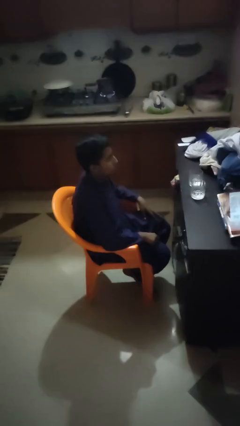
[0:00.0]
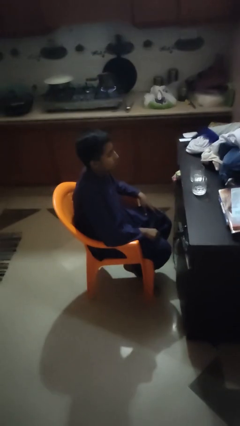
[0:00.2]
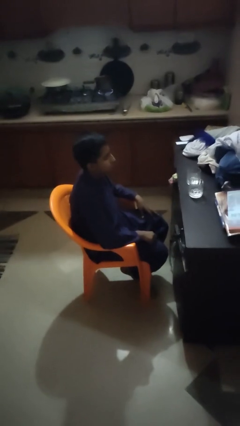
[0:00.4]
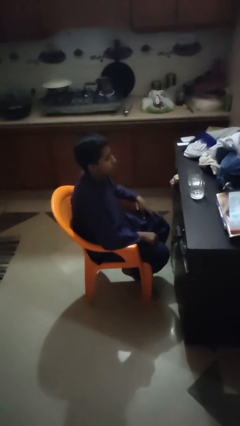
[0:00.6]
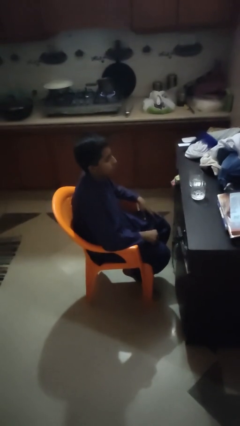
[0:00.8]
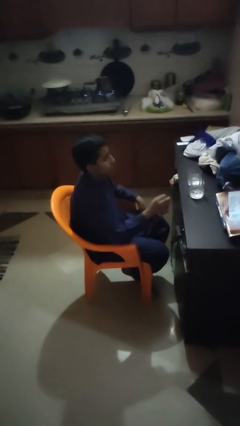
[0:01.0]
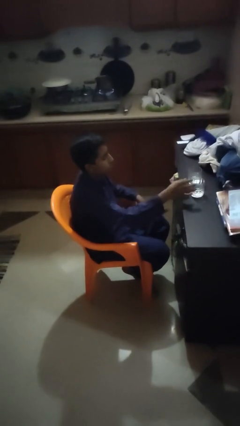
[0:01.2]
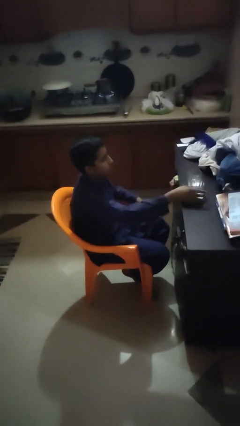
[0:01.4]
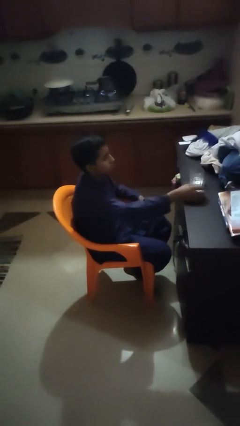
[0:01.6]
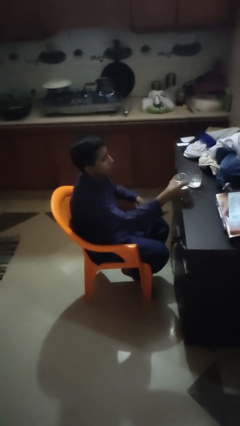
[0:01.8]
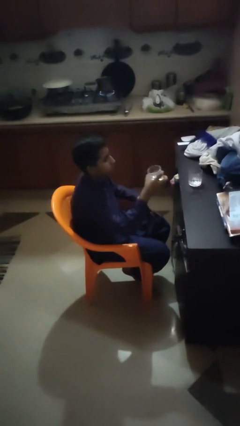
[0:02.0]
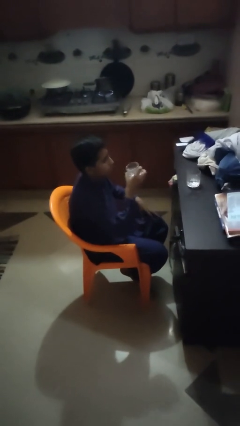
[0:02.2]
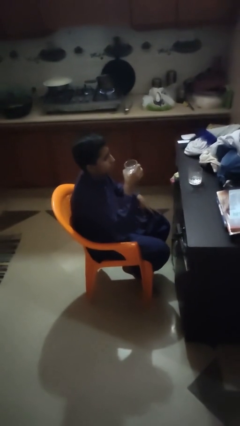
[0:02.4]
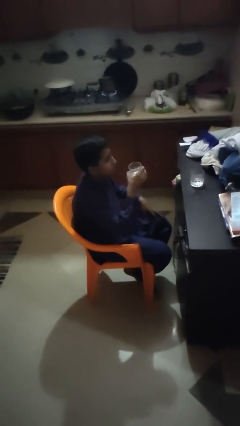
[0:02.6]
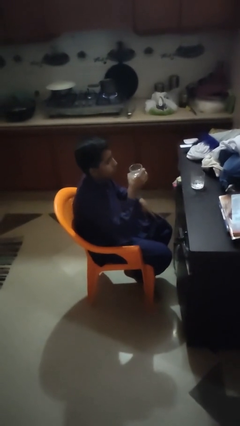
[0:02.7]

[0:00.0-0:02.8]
person picks up object from table

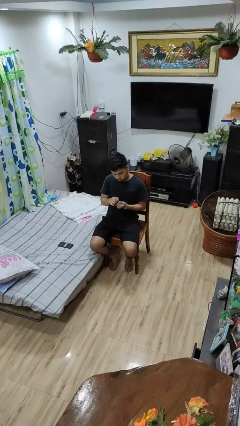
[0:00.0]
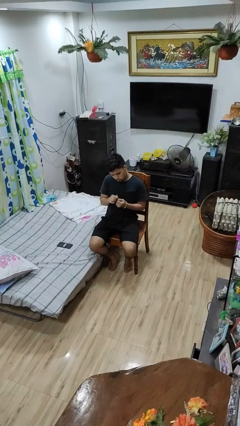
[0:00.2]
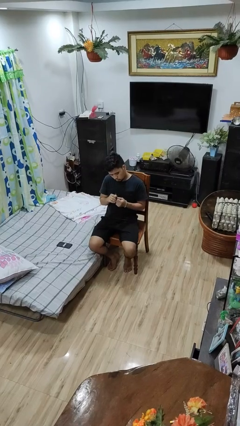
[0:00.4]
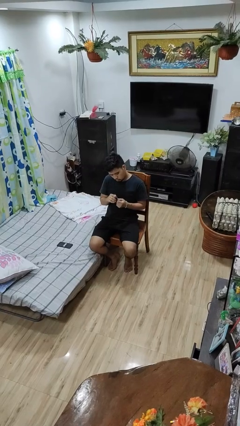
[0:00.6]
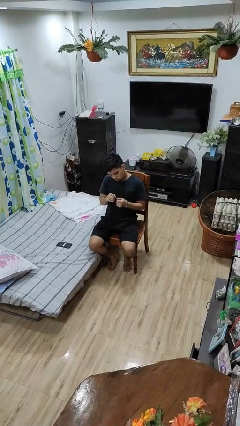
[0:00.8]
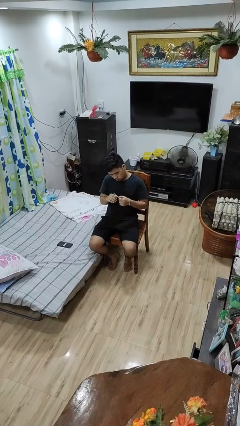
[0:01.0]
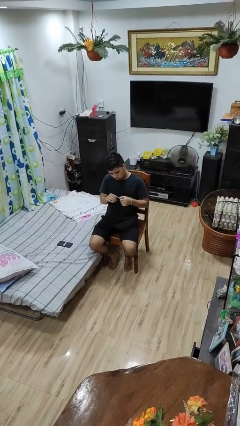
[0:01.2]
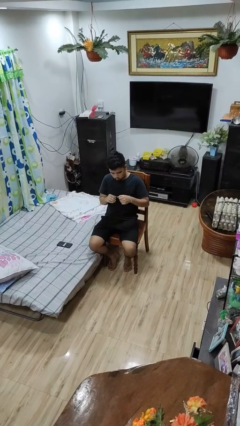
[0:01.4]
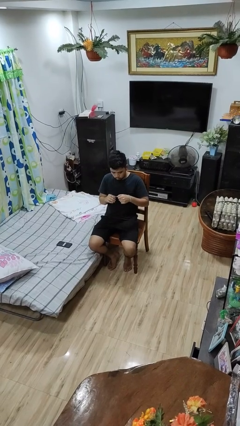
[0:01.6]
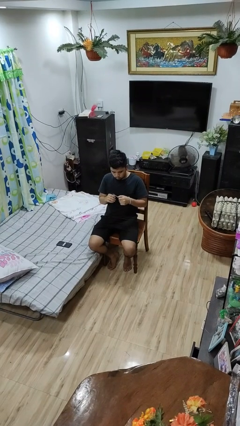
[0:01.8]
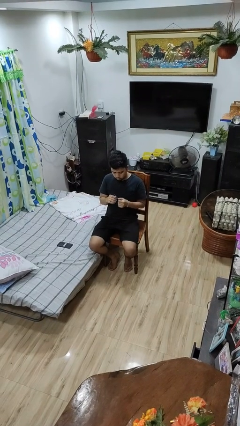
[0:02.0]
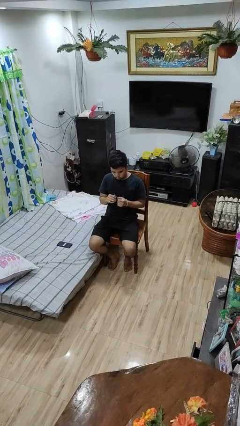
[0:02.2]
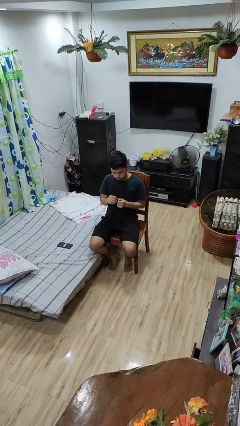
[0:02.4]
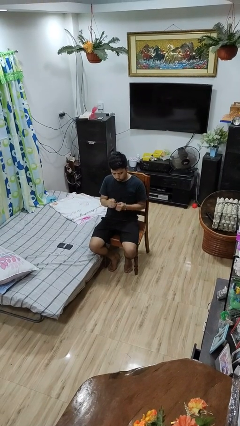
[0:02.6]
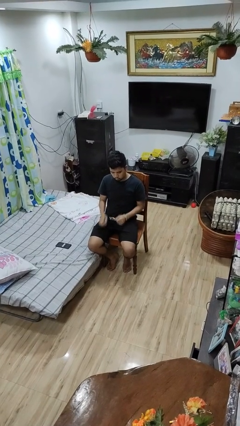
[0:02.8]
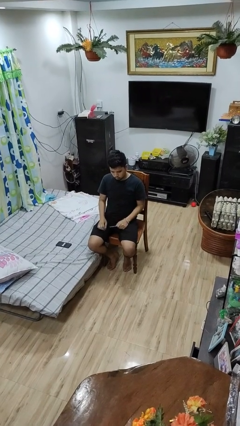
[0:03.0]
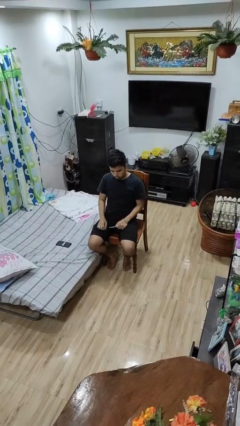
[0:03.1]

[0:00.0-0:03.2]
person files fingernails

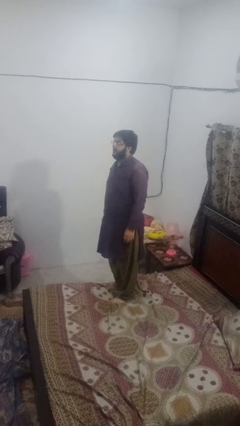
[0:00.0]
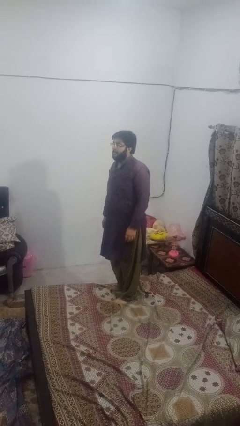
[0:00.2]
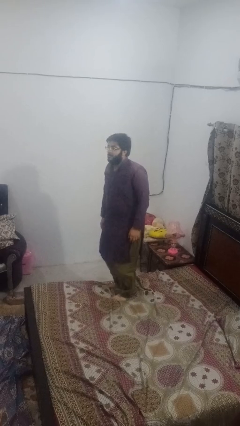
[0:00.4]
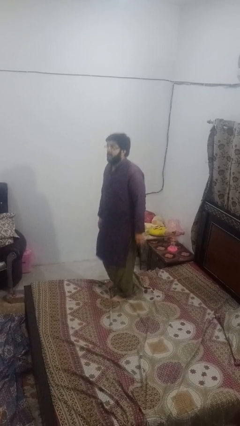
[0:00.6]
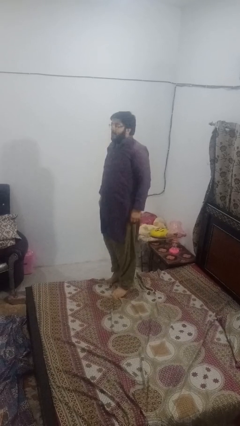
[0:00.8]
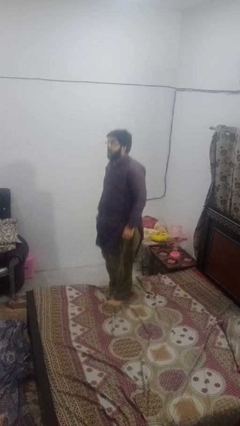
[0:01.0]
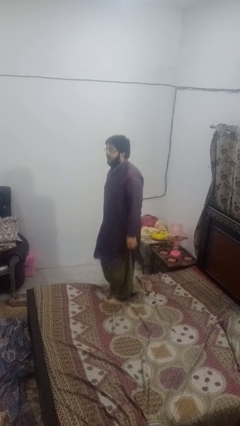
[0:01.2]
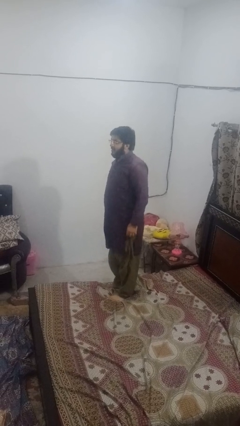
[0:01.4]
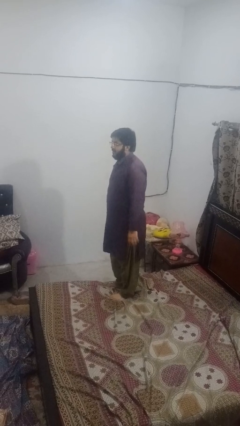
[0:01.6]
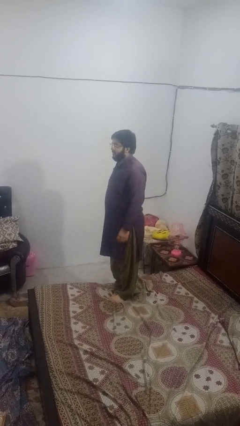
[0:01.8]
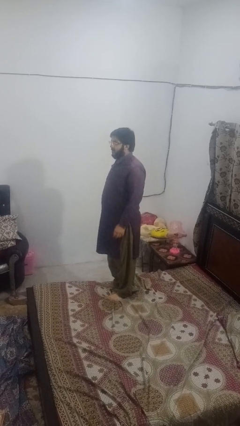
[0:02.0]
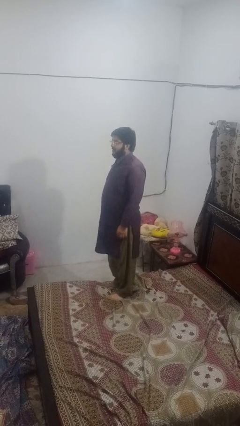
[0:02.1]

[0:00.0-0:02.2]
person jumps on bed

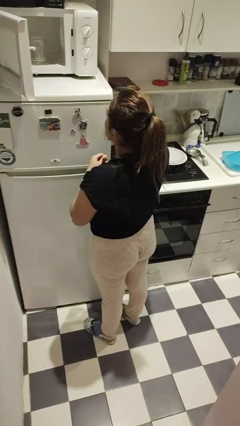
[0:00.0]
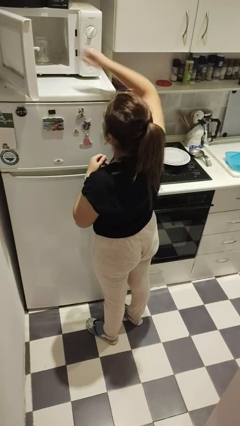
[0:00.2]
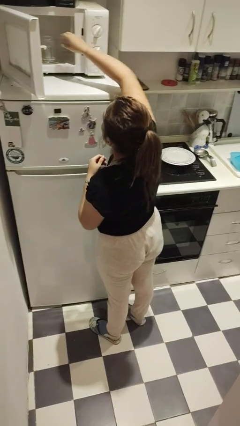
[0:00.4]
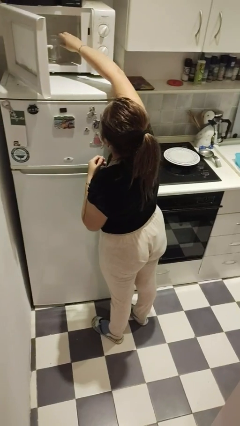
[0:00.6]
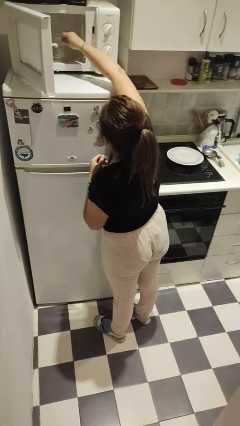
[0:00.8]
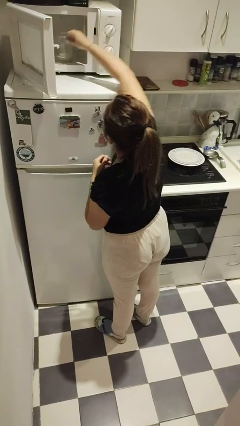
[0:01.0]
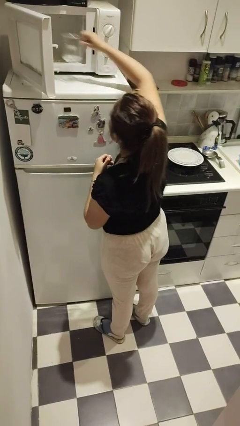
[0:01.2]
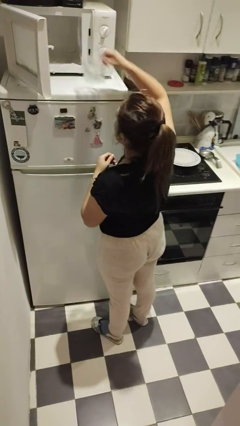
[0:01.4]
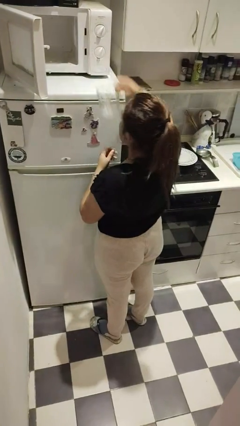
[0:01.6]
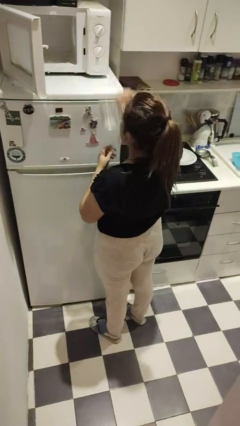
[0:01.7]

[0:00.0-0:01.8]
person takes object from microwave

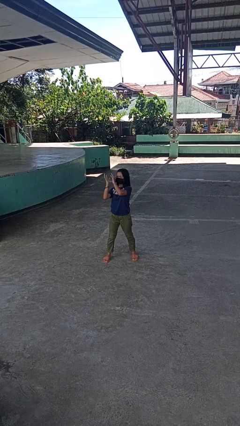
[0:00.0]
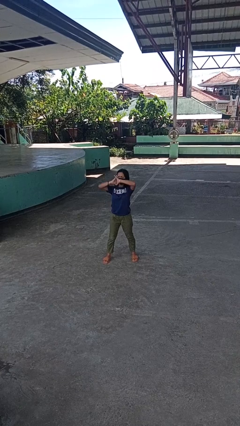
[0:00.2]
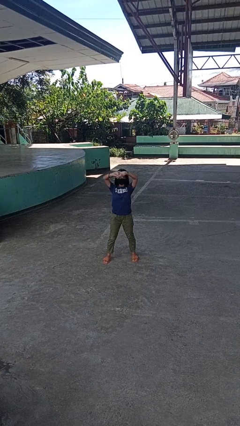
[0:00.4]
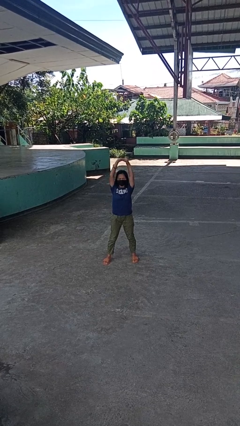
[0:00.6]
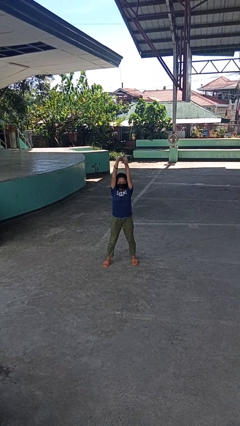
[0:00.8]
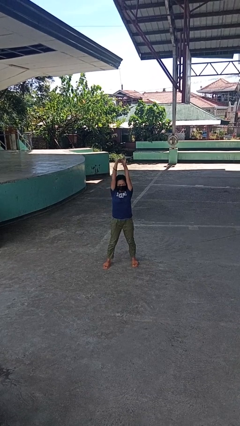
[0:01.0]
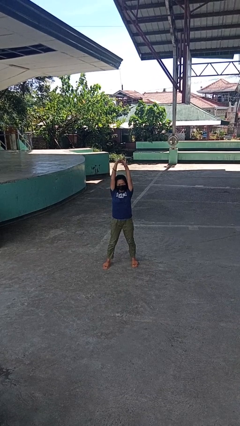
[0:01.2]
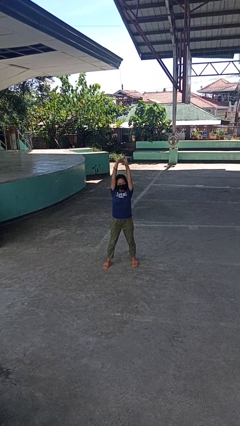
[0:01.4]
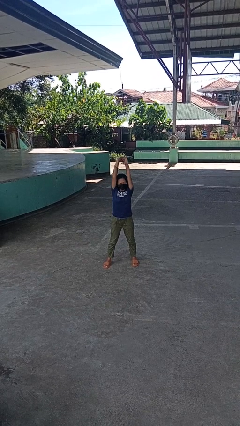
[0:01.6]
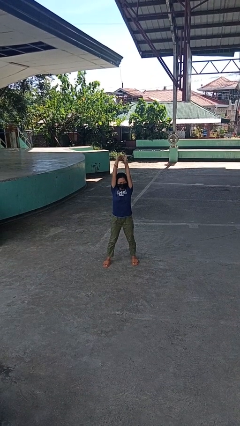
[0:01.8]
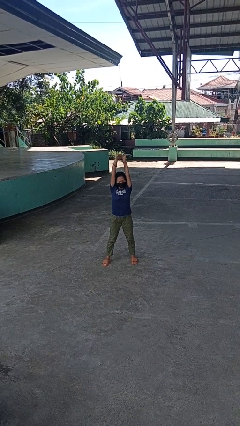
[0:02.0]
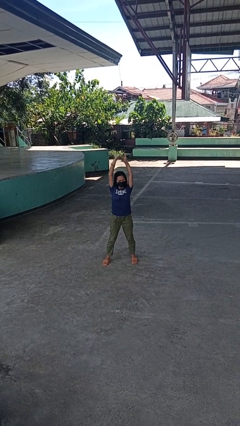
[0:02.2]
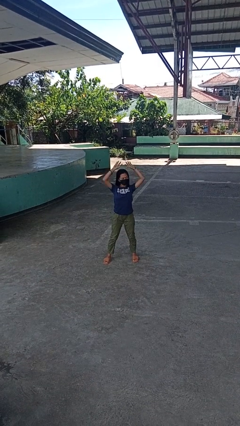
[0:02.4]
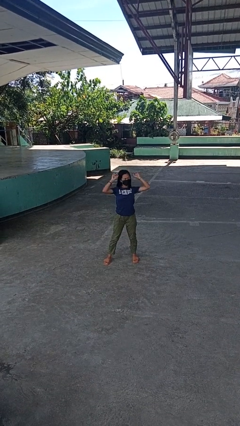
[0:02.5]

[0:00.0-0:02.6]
person stretches arms to side

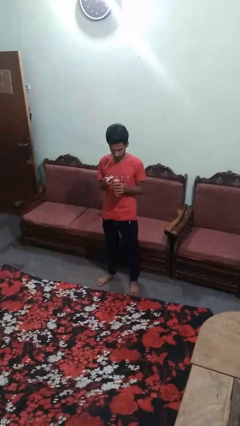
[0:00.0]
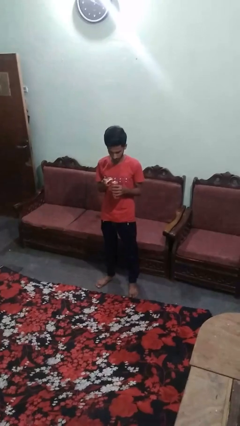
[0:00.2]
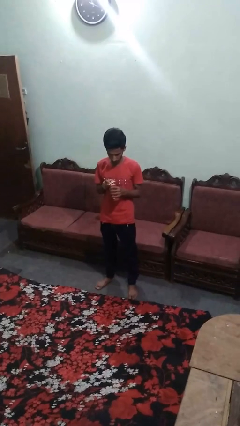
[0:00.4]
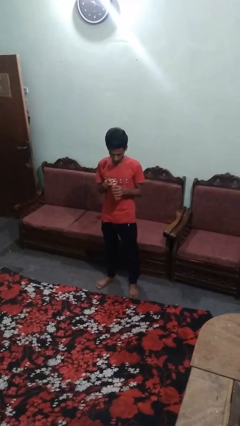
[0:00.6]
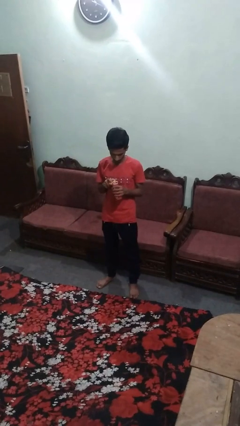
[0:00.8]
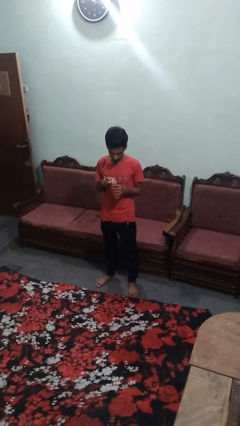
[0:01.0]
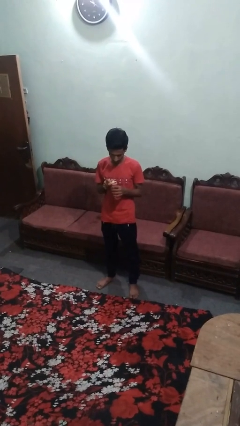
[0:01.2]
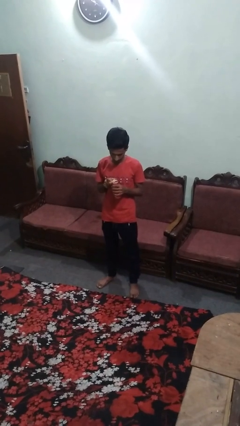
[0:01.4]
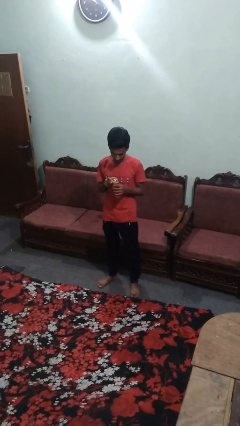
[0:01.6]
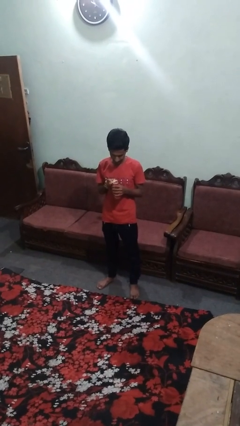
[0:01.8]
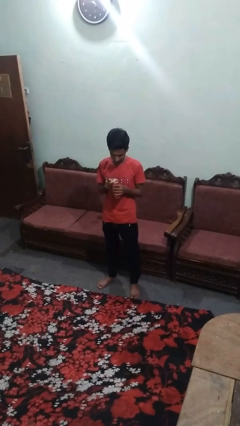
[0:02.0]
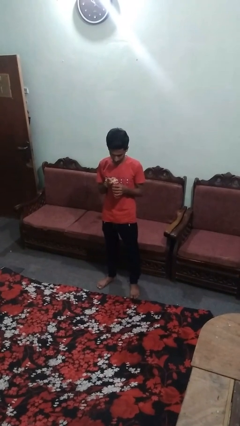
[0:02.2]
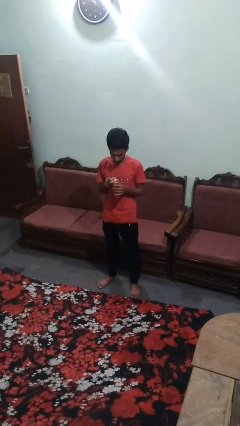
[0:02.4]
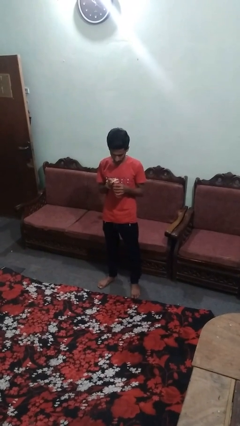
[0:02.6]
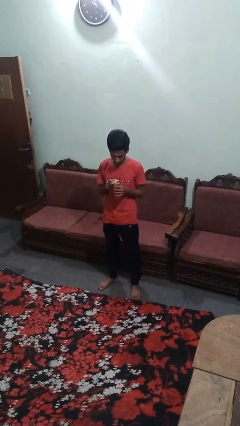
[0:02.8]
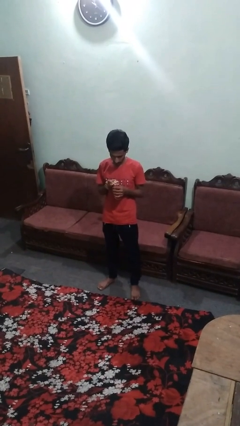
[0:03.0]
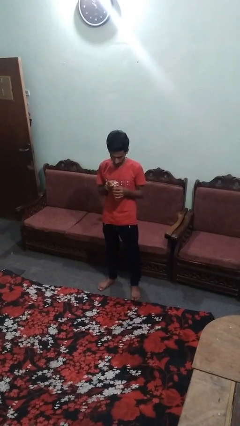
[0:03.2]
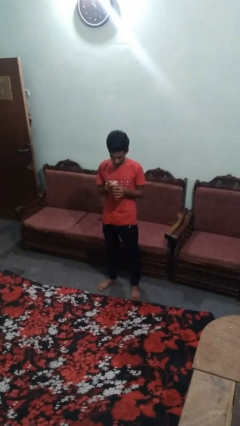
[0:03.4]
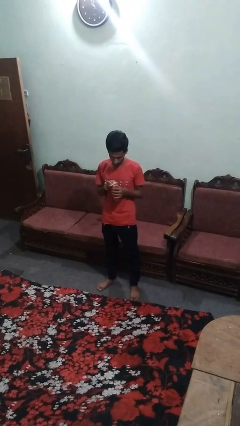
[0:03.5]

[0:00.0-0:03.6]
person opens can with can opener

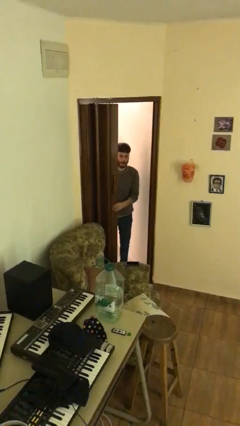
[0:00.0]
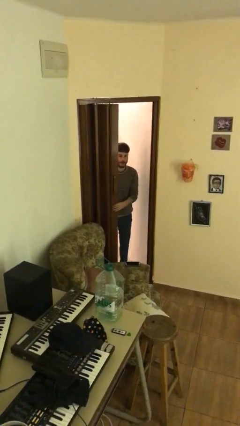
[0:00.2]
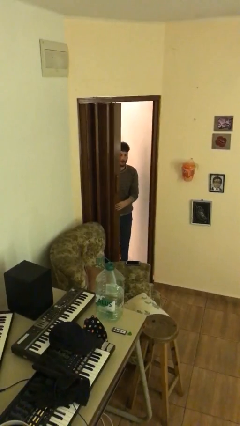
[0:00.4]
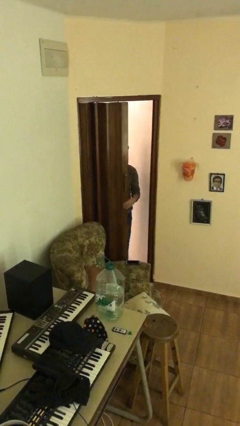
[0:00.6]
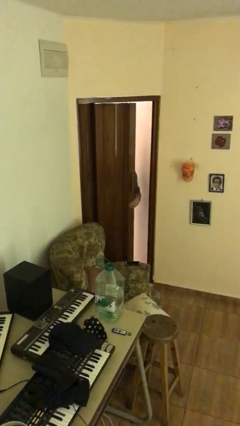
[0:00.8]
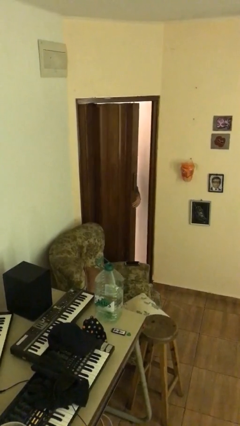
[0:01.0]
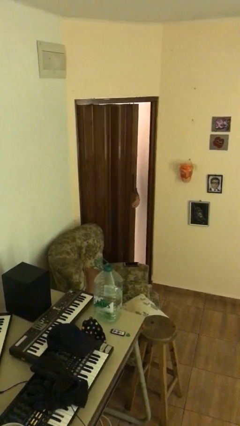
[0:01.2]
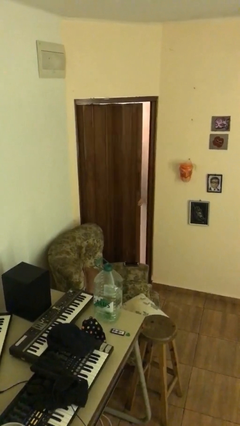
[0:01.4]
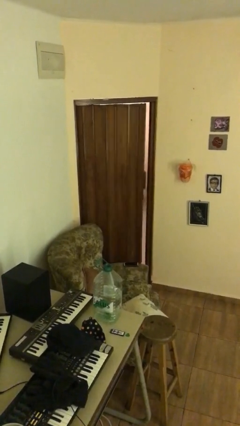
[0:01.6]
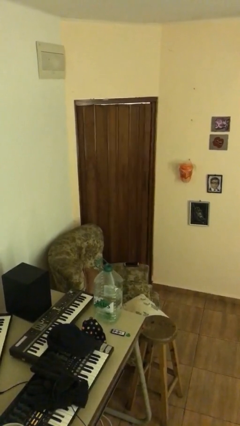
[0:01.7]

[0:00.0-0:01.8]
person closes sliding door
